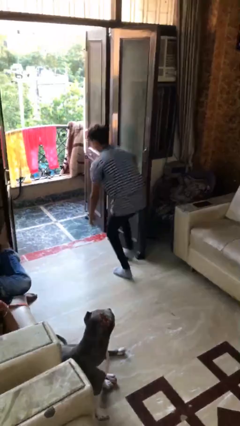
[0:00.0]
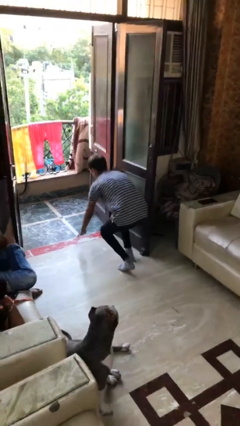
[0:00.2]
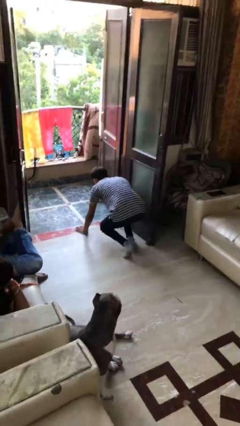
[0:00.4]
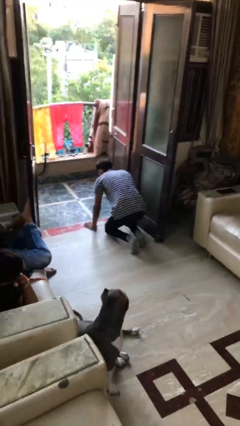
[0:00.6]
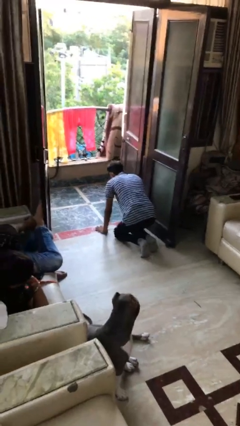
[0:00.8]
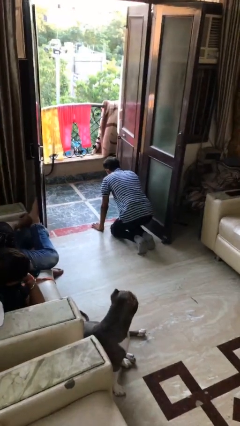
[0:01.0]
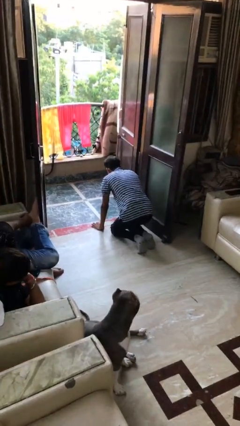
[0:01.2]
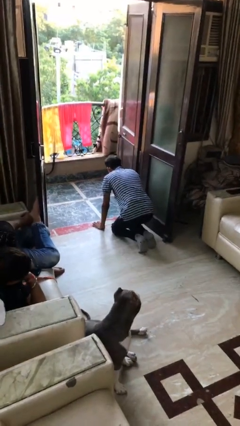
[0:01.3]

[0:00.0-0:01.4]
person trips on object on floor

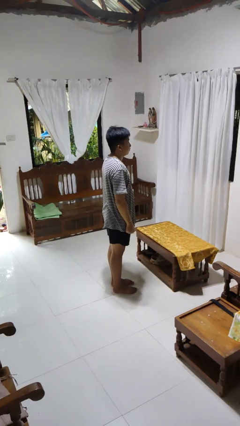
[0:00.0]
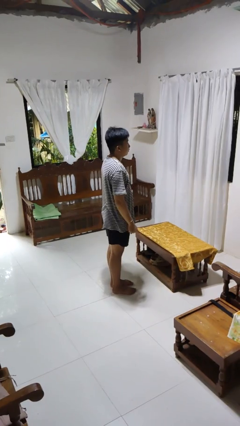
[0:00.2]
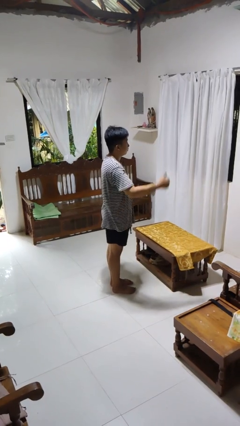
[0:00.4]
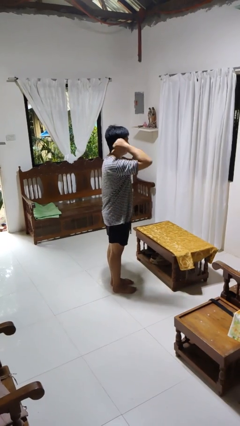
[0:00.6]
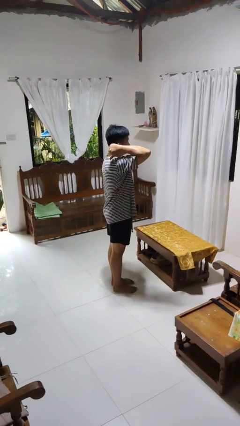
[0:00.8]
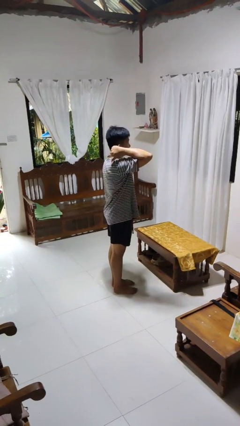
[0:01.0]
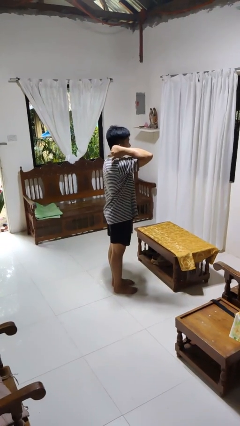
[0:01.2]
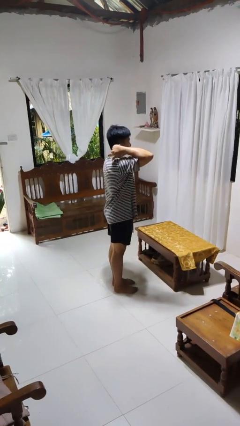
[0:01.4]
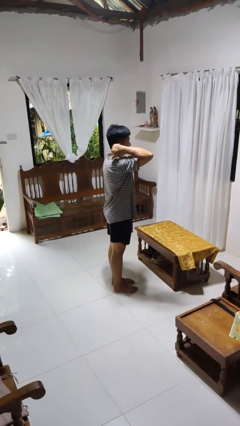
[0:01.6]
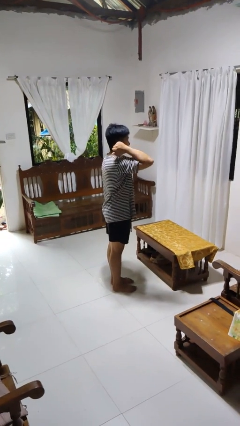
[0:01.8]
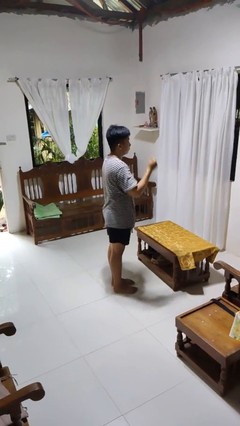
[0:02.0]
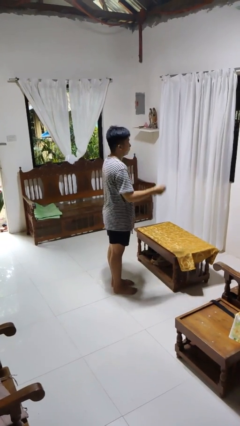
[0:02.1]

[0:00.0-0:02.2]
person gestures behind me

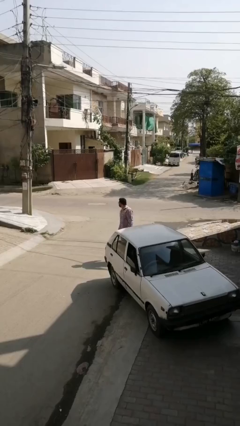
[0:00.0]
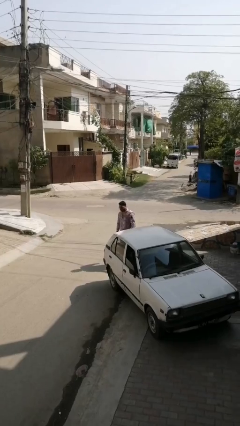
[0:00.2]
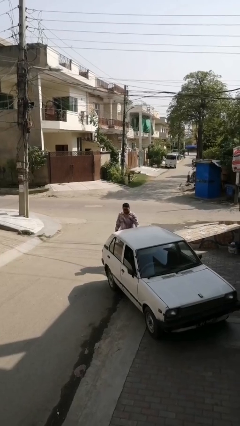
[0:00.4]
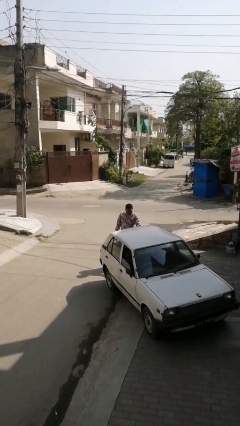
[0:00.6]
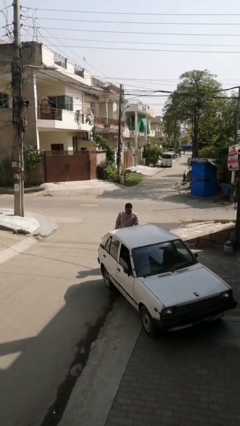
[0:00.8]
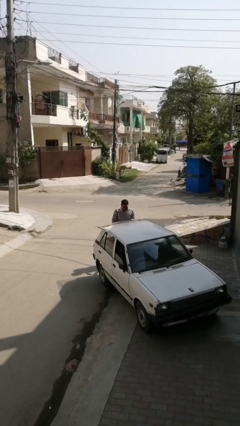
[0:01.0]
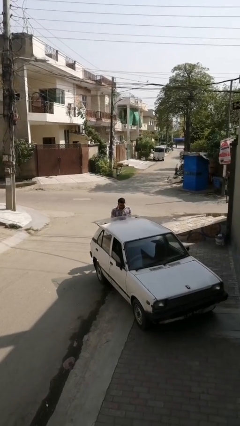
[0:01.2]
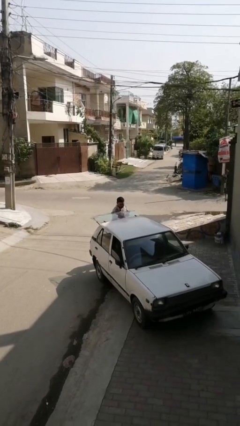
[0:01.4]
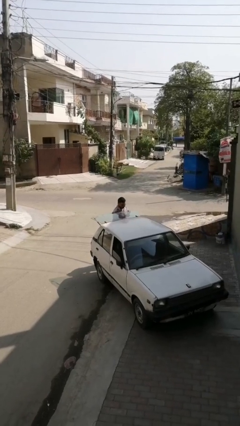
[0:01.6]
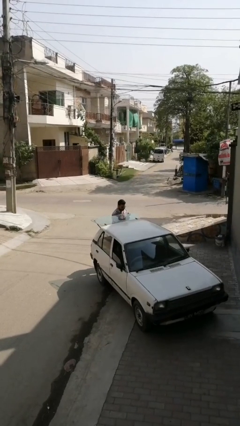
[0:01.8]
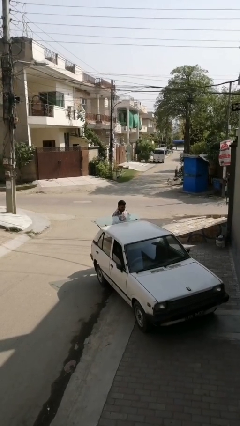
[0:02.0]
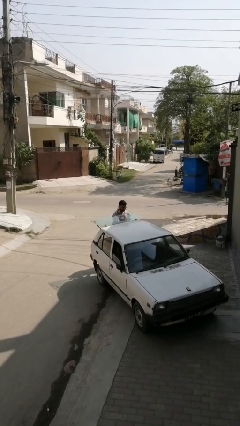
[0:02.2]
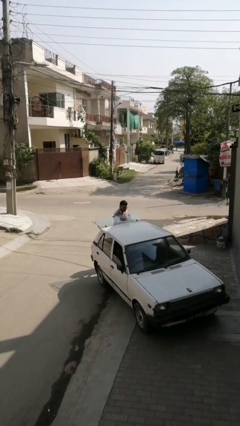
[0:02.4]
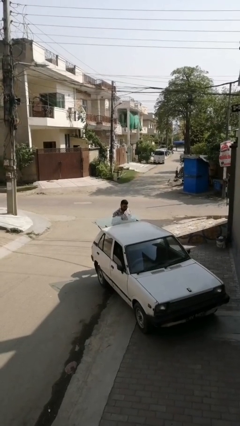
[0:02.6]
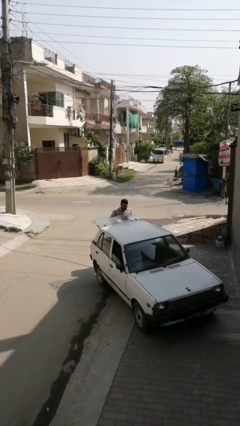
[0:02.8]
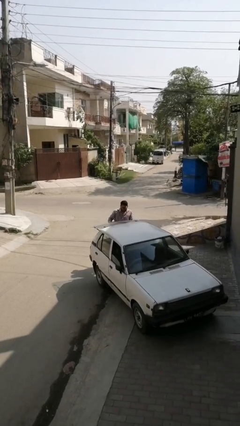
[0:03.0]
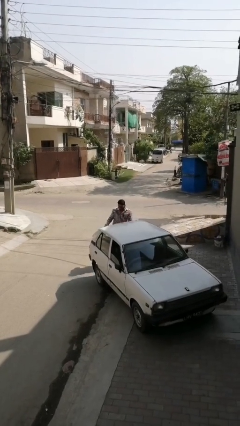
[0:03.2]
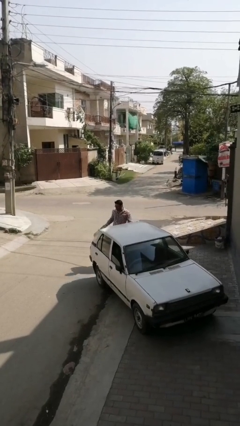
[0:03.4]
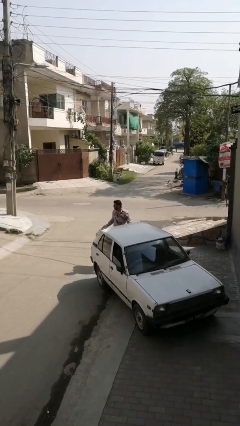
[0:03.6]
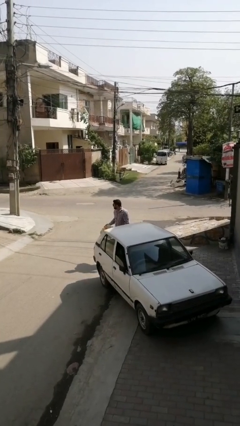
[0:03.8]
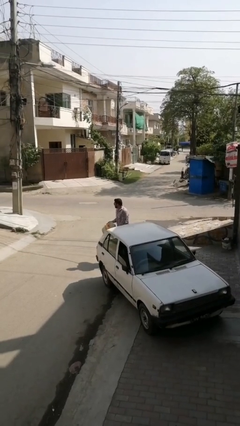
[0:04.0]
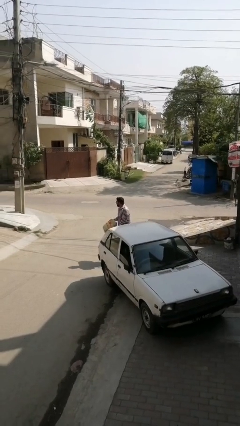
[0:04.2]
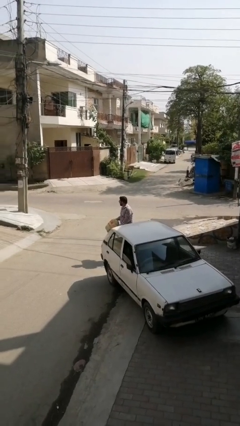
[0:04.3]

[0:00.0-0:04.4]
person unloads car

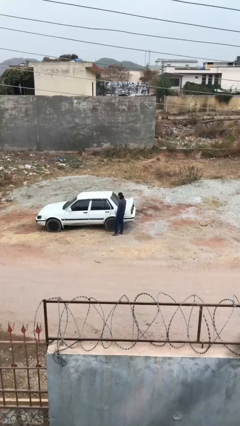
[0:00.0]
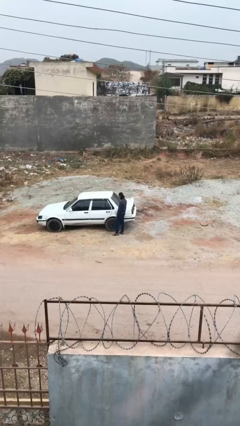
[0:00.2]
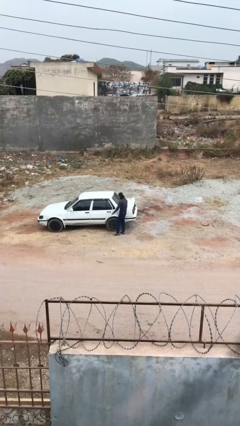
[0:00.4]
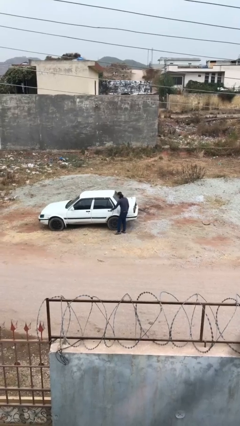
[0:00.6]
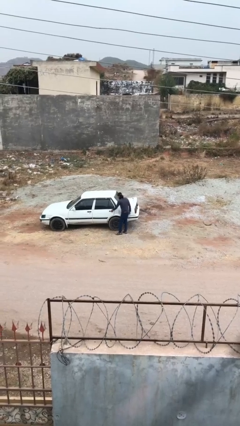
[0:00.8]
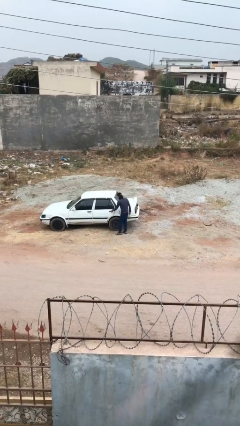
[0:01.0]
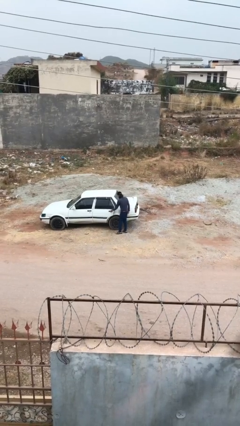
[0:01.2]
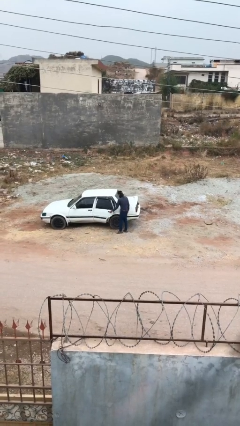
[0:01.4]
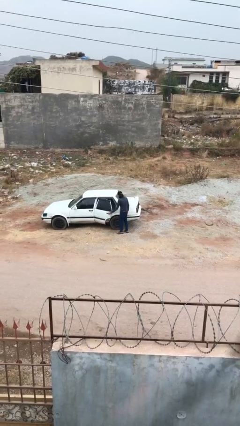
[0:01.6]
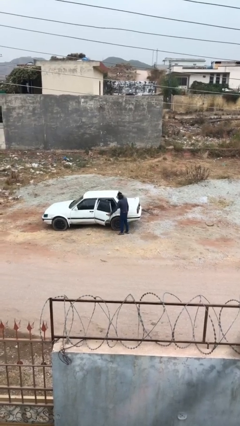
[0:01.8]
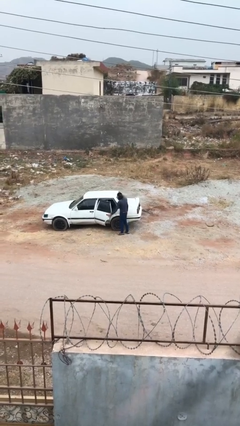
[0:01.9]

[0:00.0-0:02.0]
person opens car door

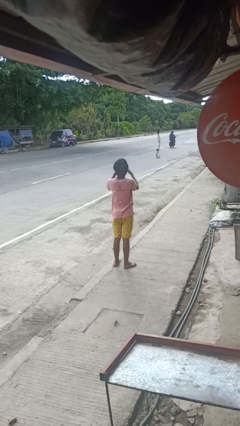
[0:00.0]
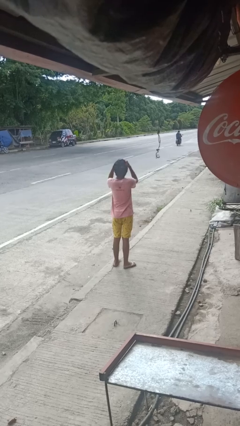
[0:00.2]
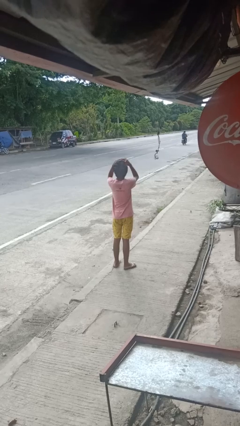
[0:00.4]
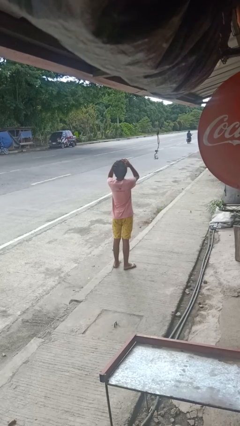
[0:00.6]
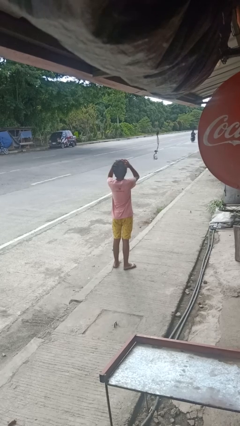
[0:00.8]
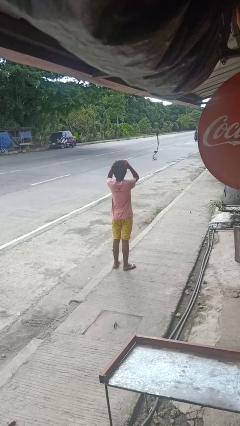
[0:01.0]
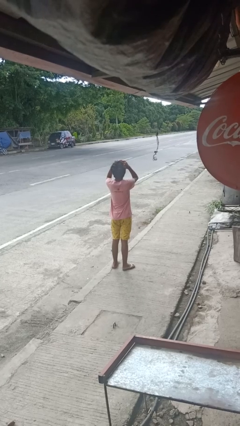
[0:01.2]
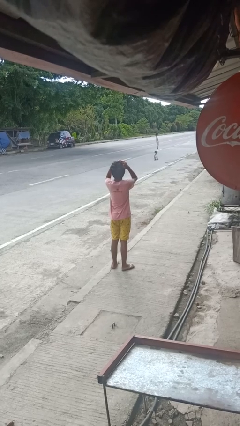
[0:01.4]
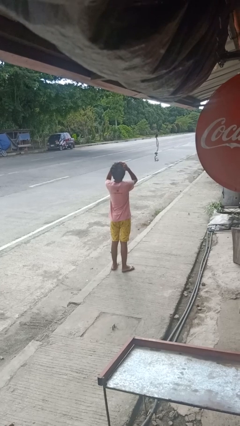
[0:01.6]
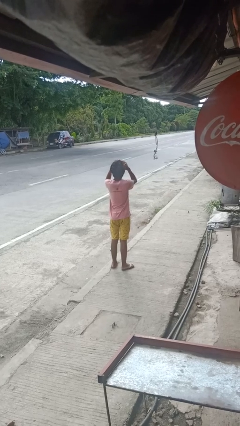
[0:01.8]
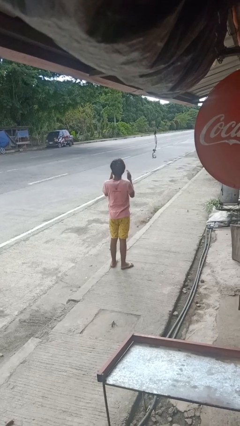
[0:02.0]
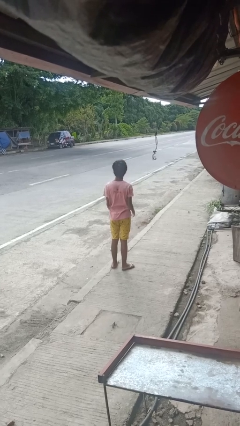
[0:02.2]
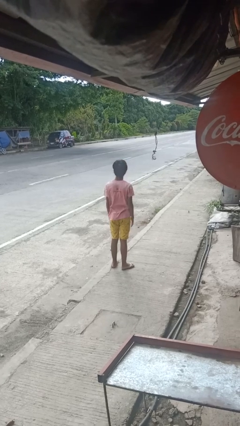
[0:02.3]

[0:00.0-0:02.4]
person shades eyes

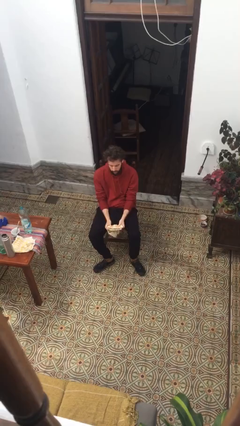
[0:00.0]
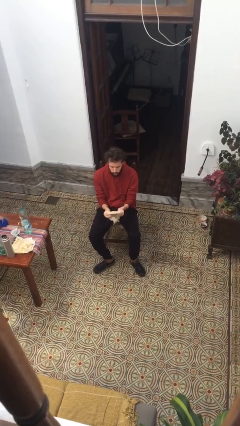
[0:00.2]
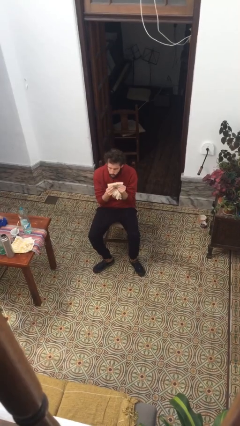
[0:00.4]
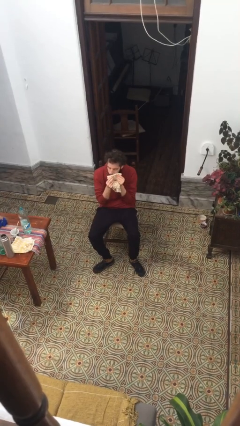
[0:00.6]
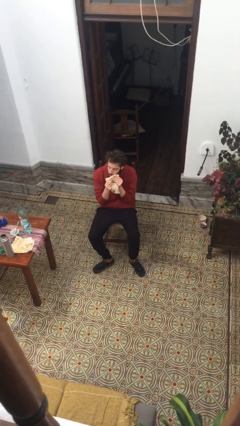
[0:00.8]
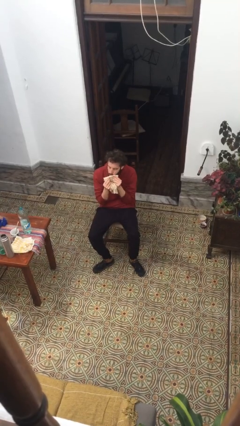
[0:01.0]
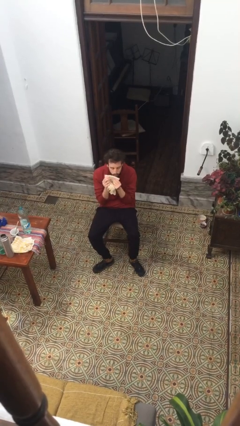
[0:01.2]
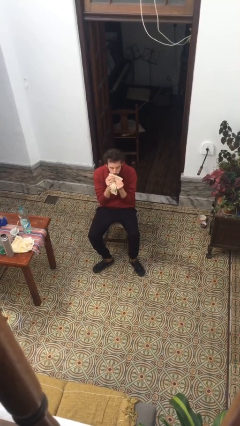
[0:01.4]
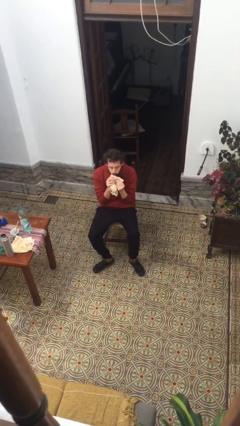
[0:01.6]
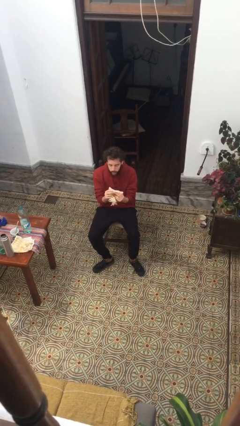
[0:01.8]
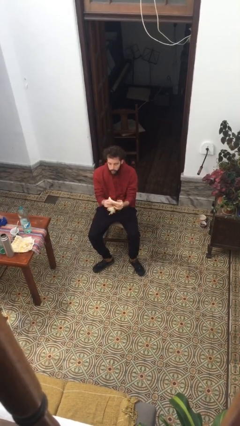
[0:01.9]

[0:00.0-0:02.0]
person wipes mouth with napkin

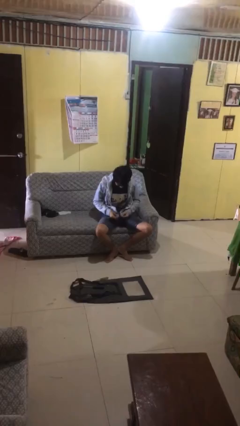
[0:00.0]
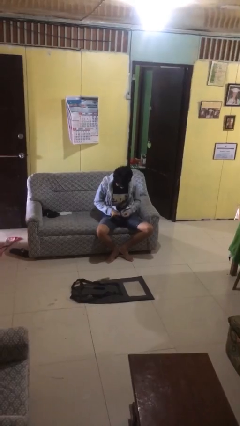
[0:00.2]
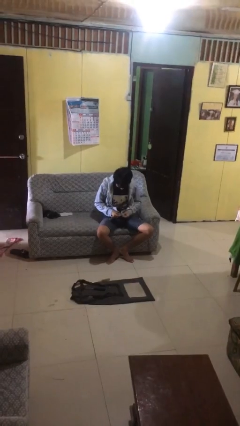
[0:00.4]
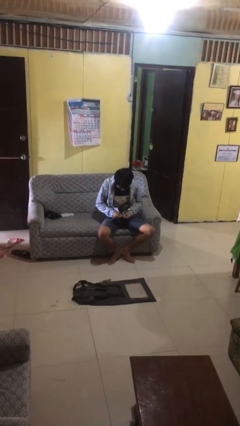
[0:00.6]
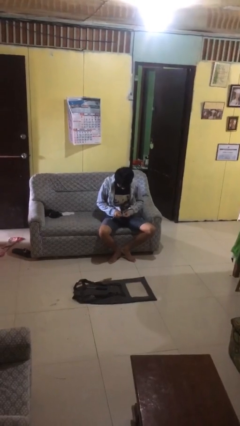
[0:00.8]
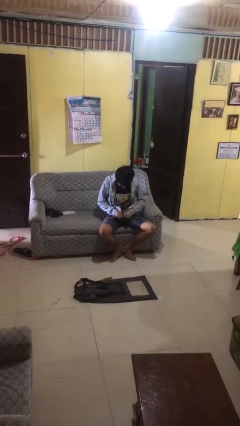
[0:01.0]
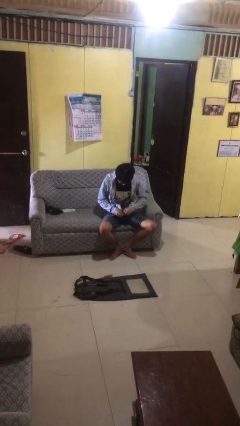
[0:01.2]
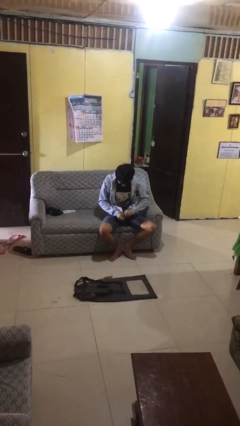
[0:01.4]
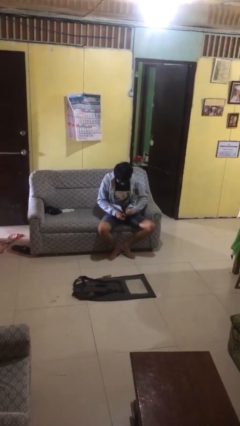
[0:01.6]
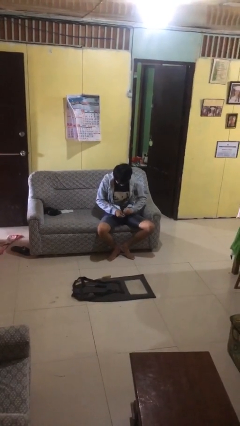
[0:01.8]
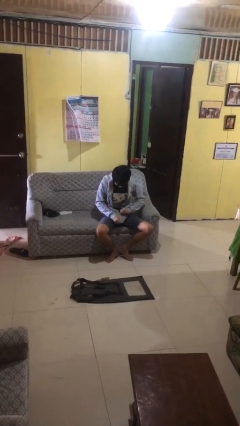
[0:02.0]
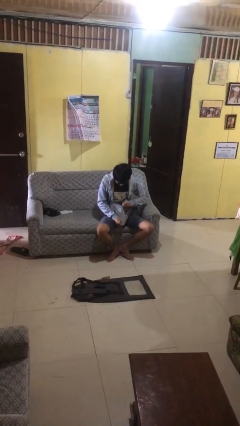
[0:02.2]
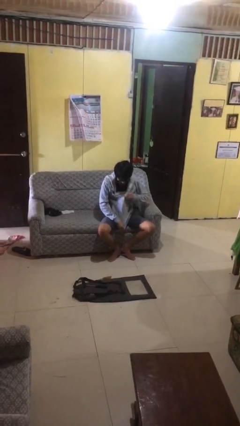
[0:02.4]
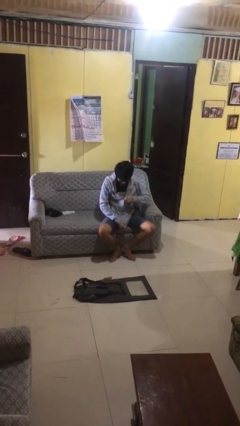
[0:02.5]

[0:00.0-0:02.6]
person zips up jacket

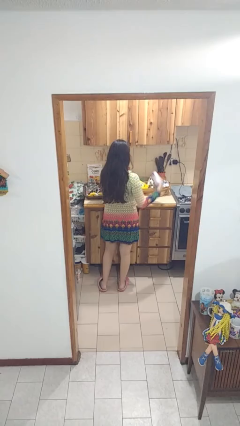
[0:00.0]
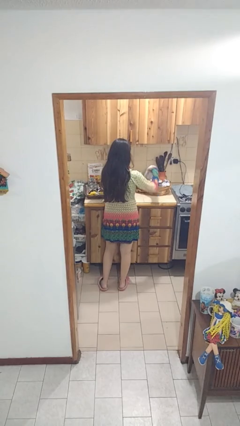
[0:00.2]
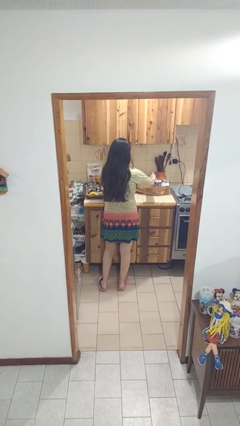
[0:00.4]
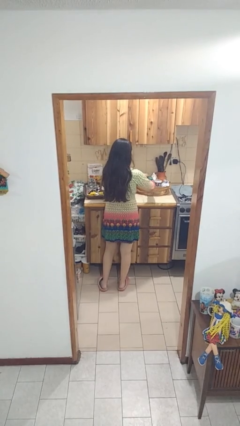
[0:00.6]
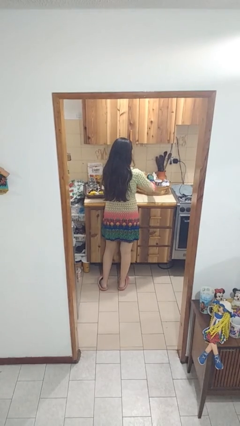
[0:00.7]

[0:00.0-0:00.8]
person puts object into bag
